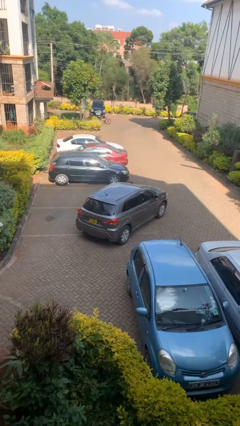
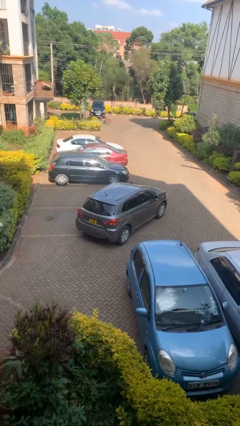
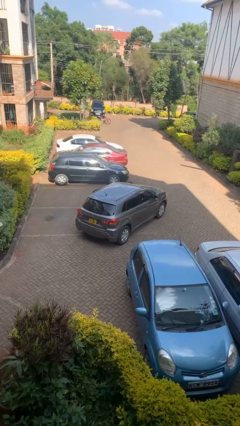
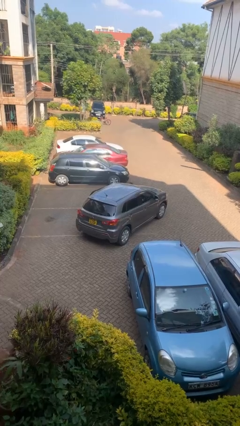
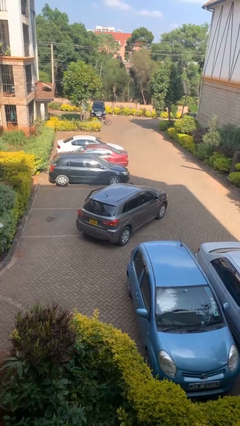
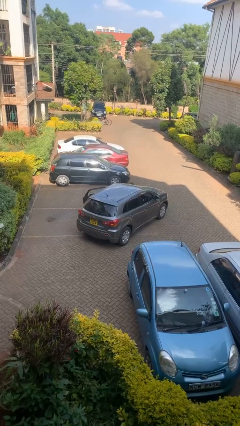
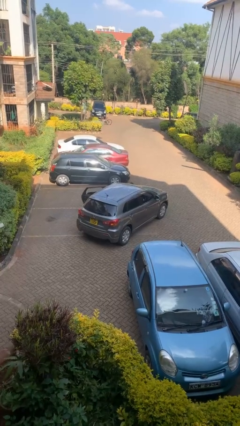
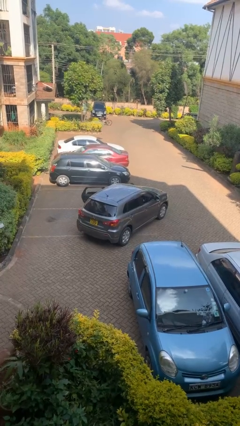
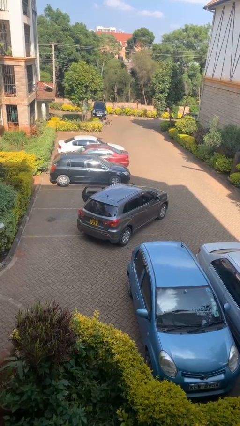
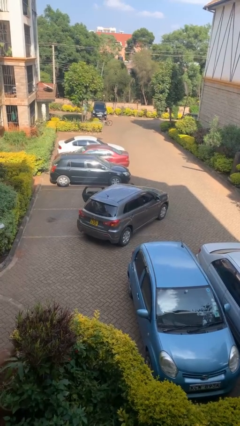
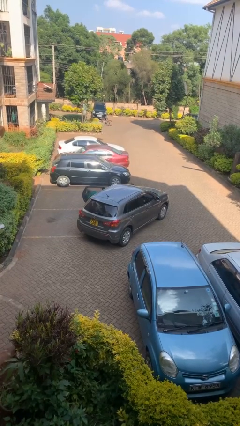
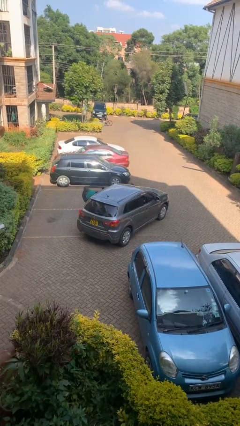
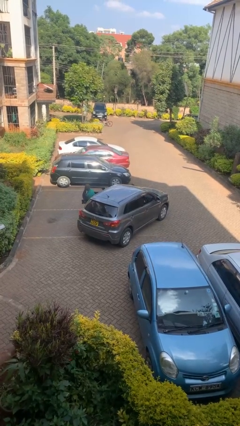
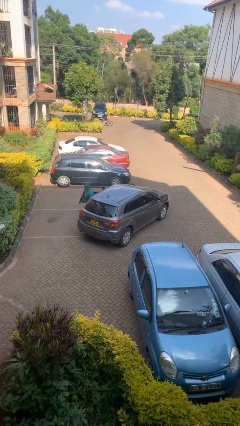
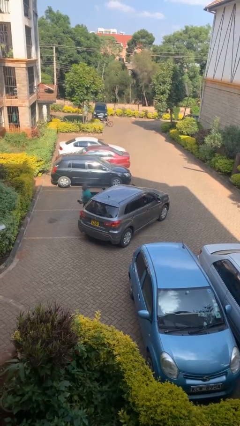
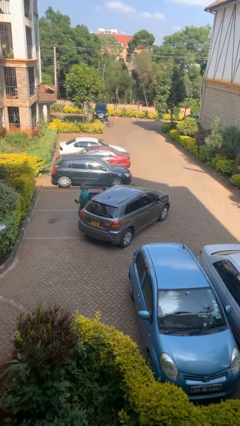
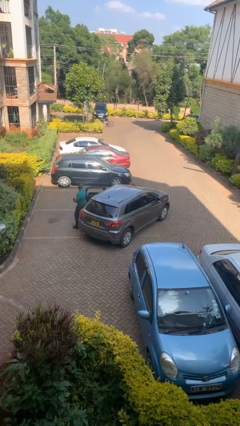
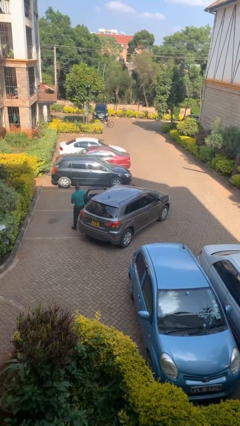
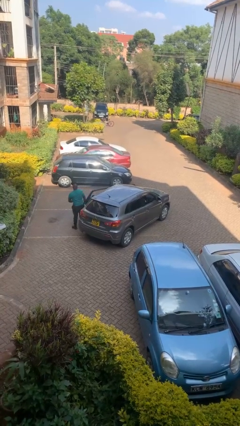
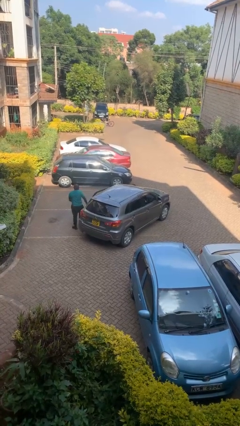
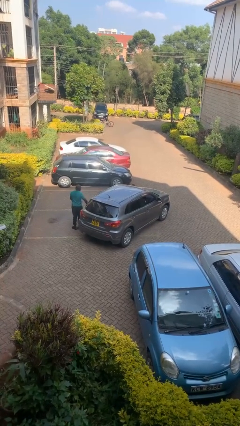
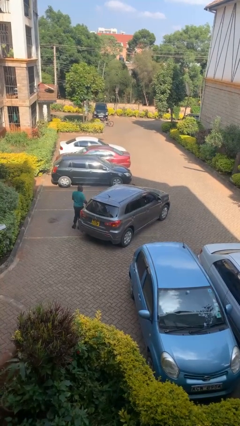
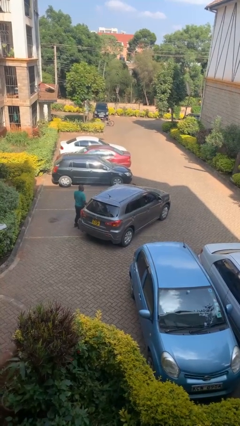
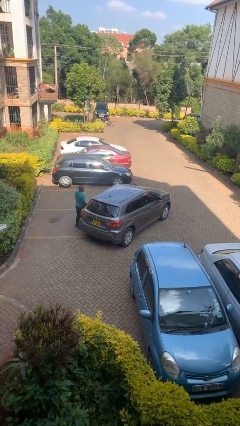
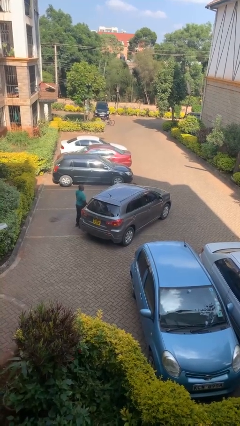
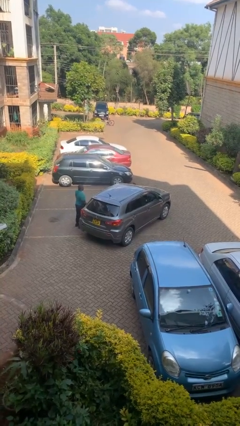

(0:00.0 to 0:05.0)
car drops off person

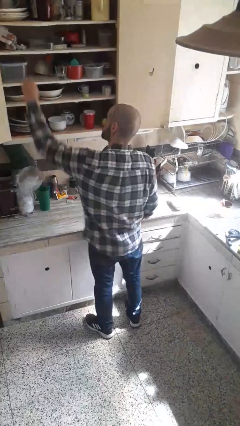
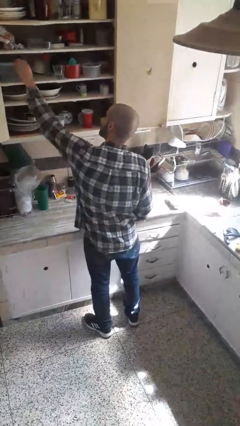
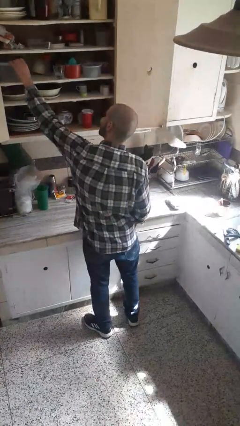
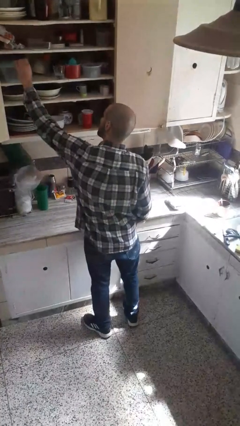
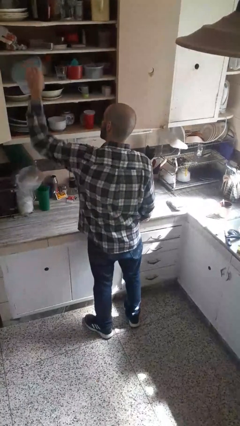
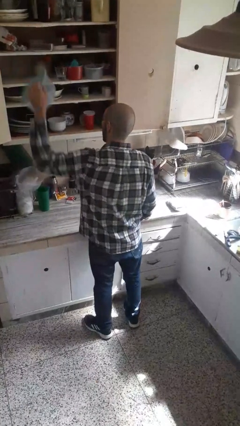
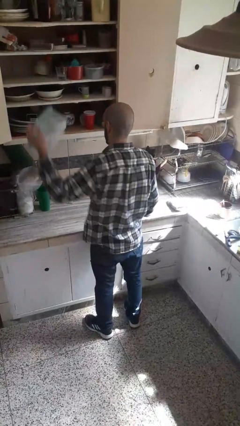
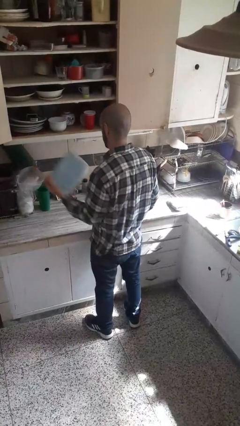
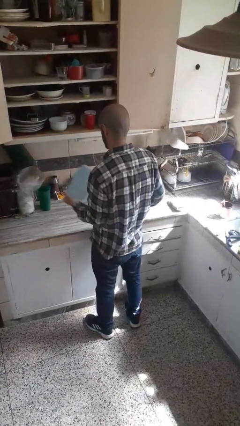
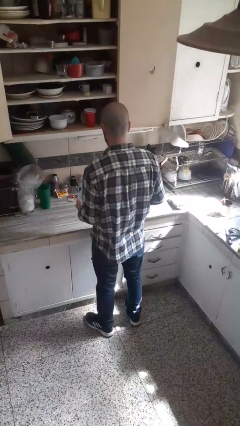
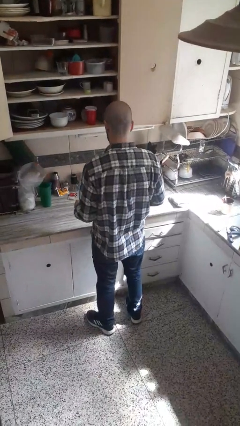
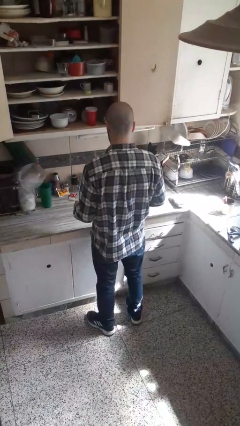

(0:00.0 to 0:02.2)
person picks up object from cabinet

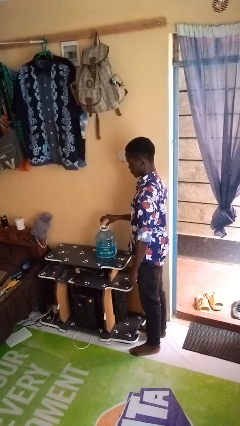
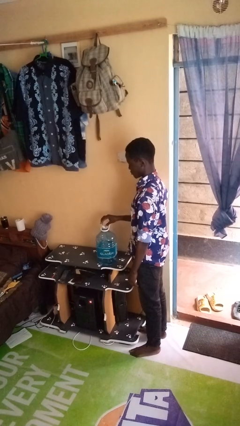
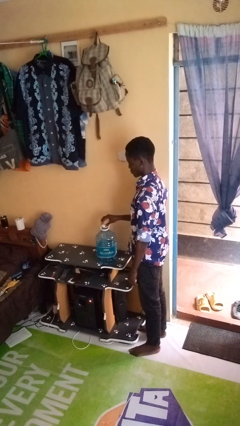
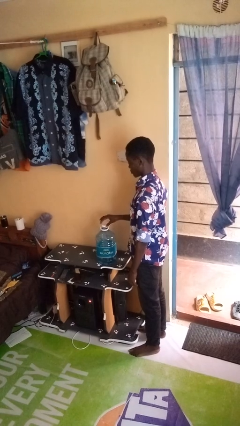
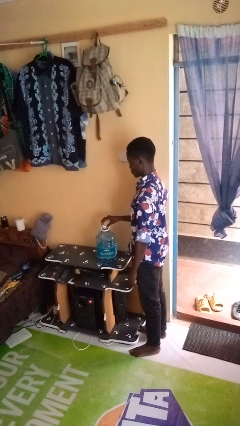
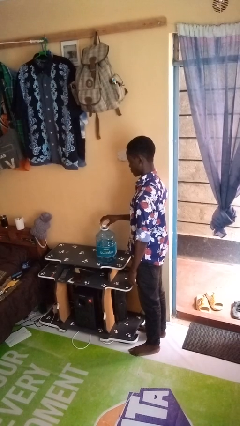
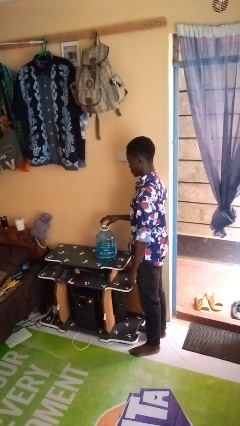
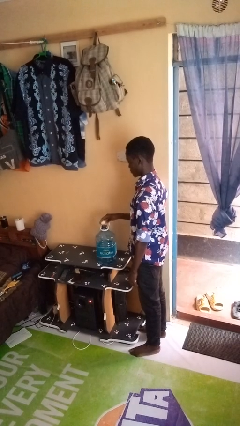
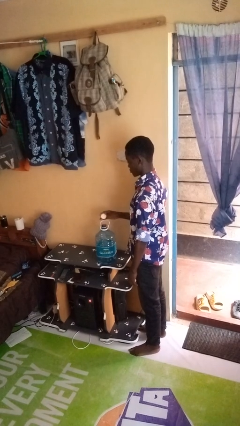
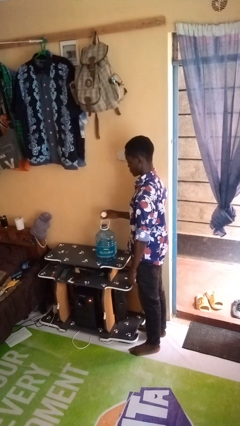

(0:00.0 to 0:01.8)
person unscrews lid from bottle

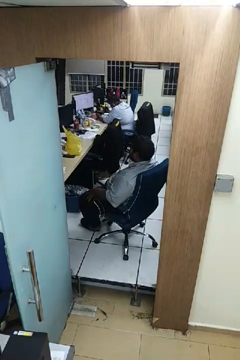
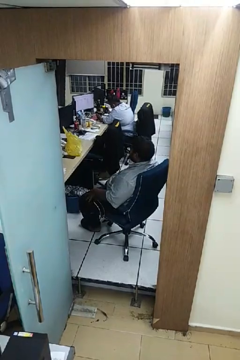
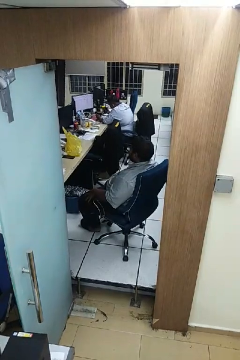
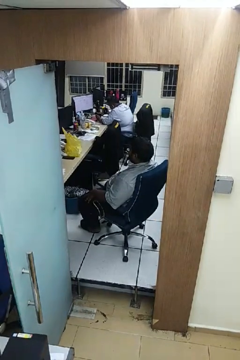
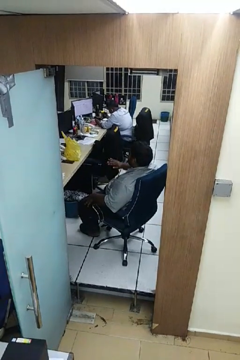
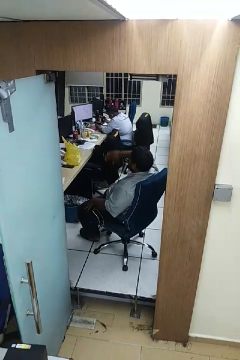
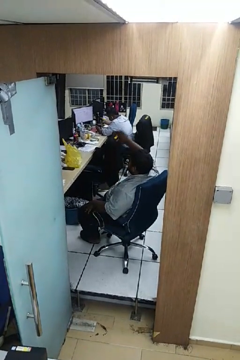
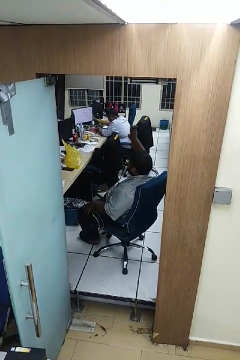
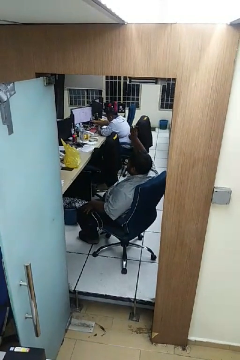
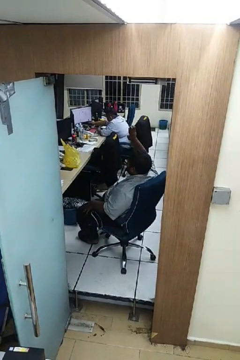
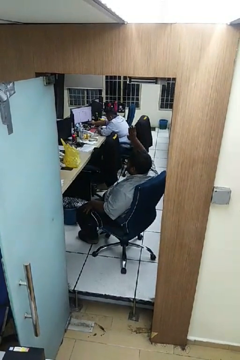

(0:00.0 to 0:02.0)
person gestures swipe up

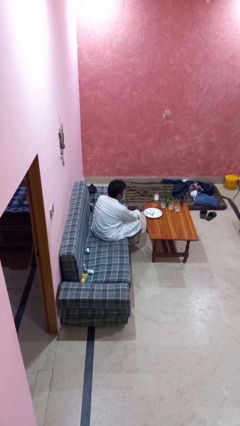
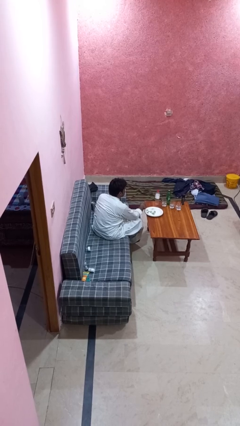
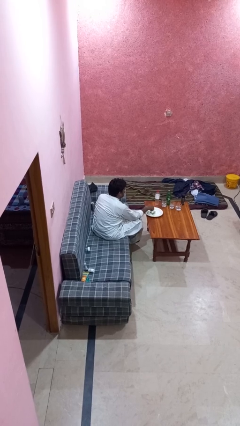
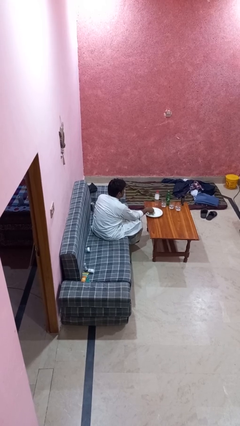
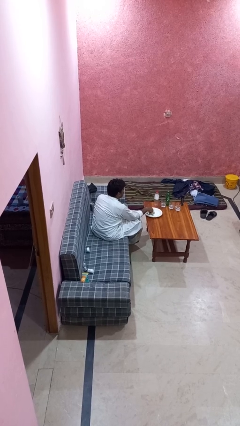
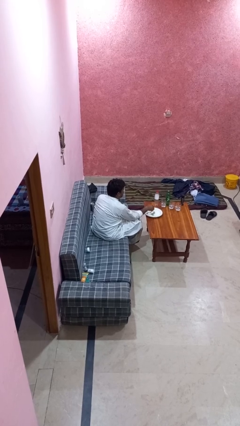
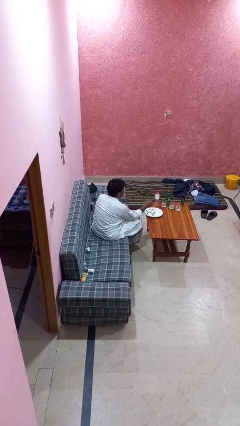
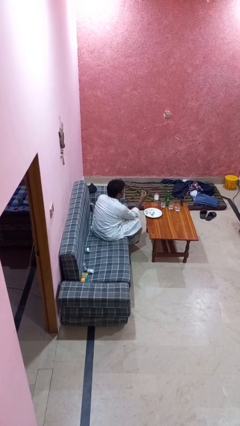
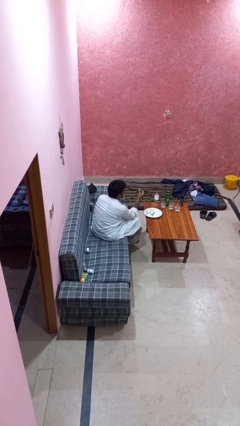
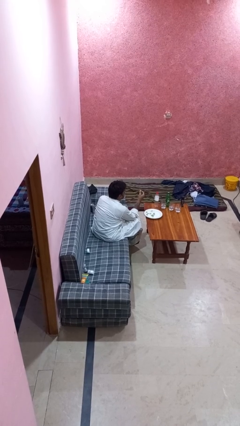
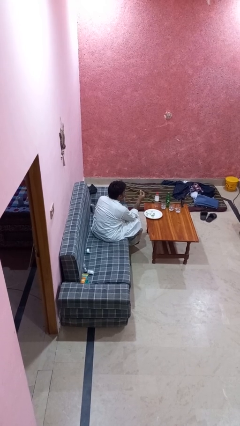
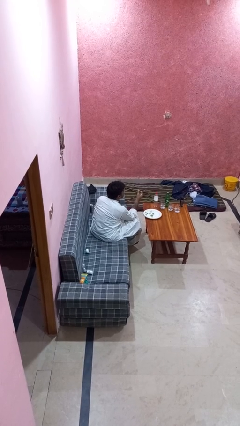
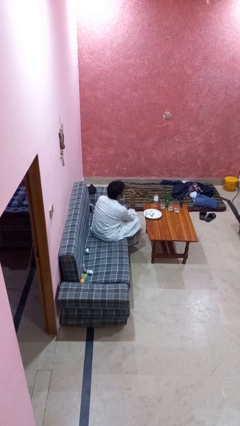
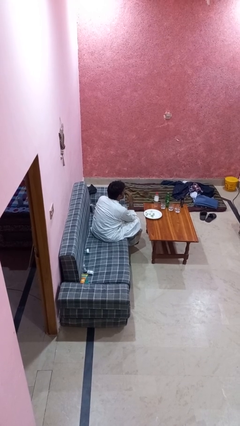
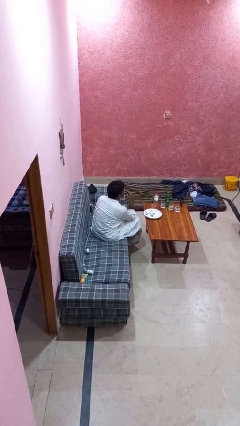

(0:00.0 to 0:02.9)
person eats with hands

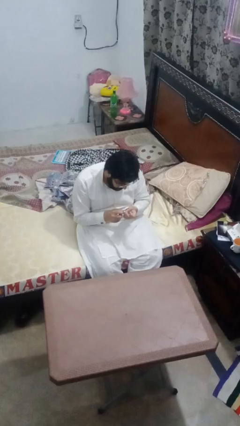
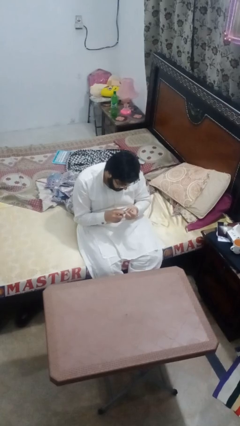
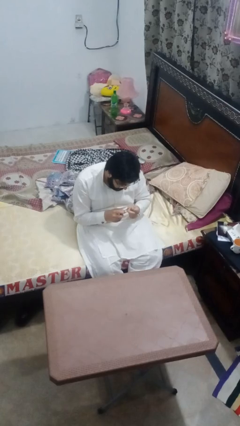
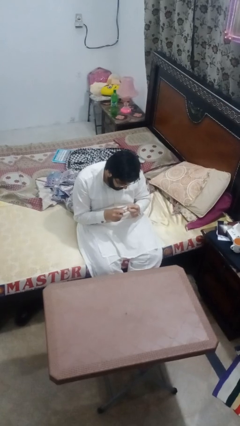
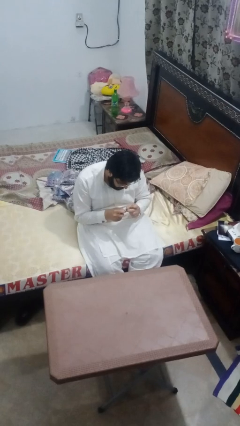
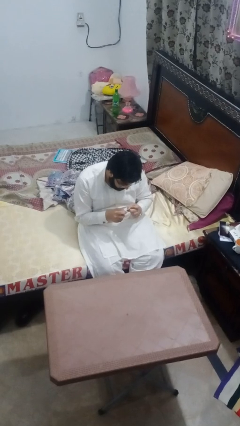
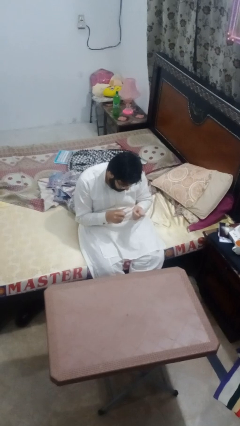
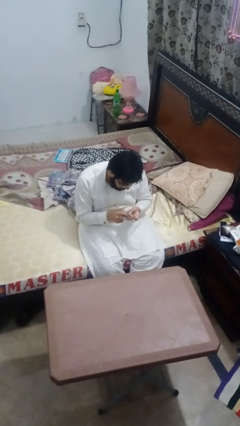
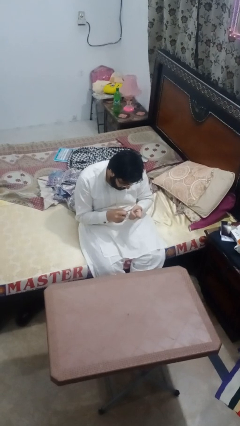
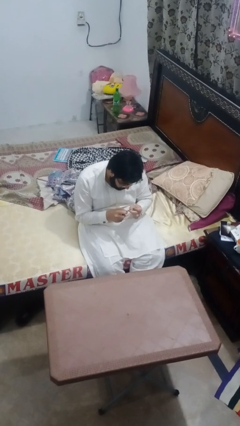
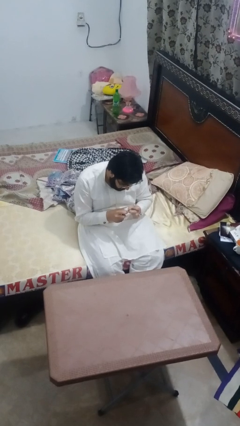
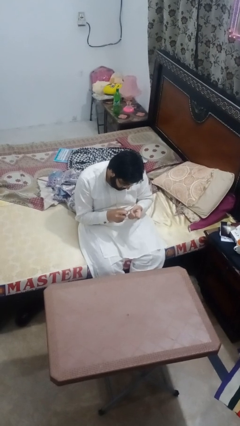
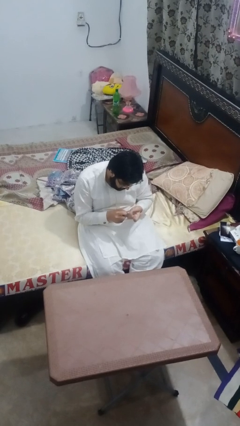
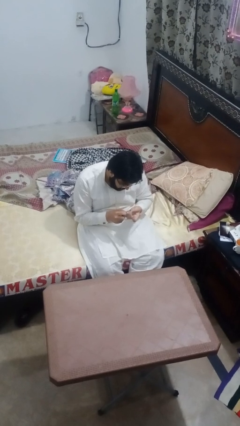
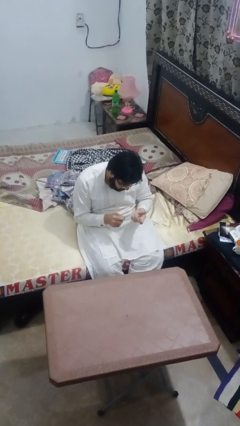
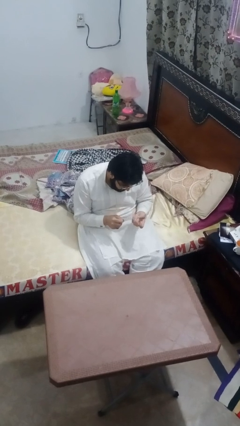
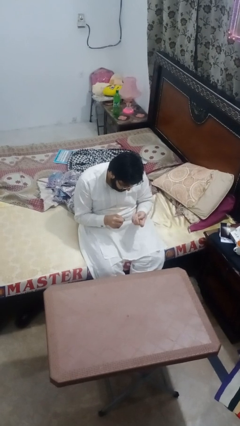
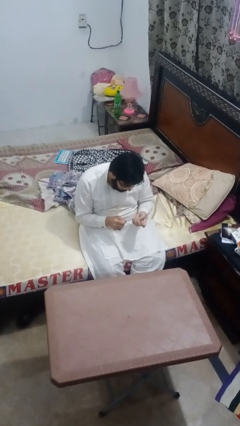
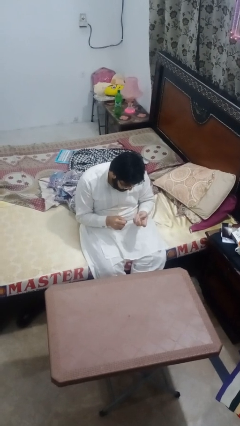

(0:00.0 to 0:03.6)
person files fingernails
